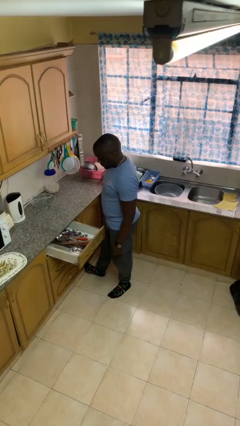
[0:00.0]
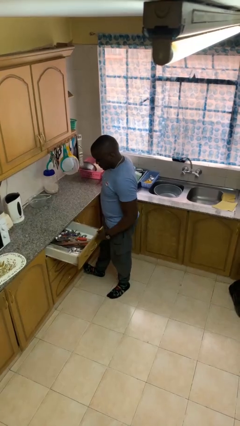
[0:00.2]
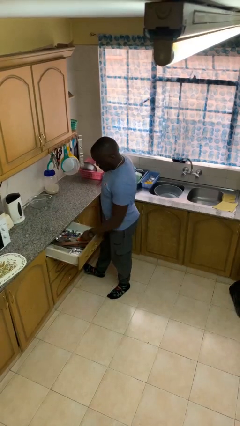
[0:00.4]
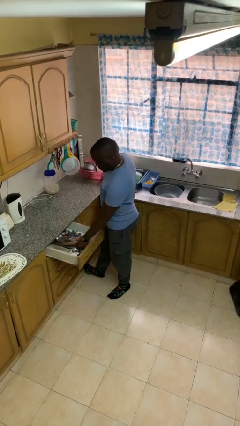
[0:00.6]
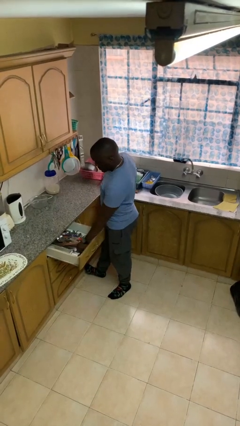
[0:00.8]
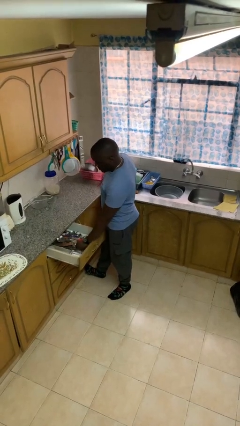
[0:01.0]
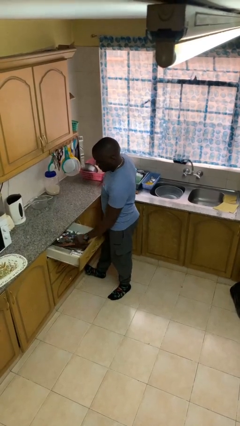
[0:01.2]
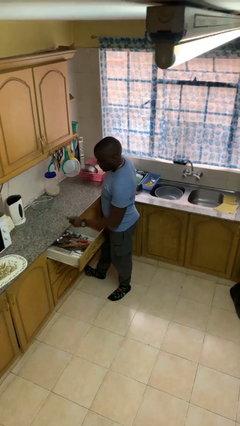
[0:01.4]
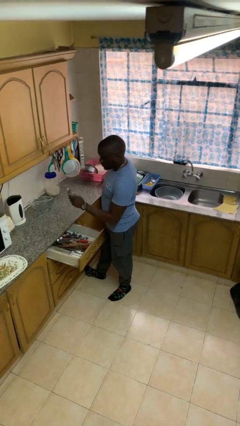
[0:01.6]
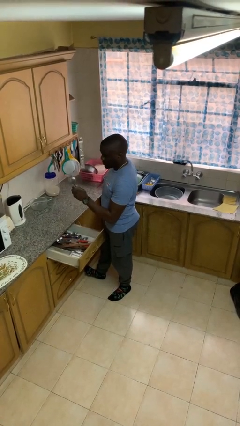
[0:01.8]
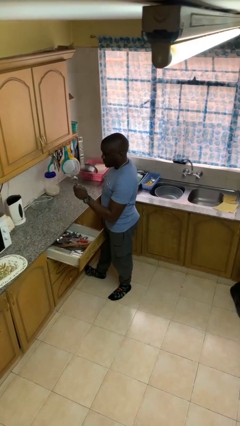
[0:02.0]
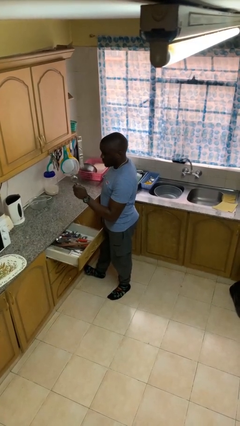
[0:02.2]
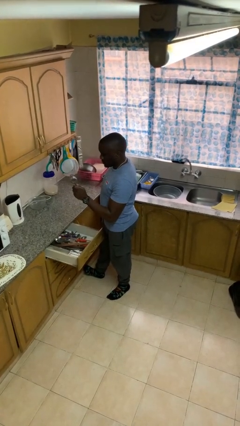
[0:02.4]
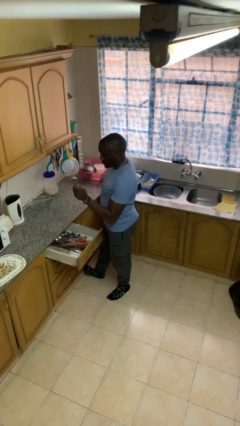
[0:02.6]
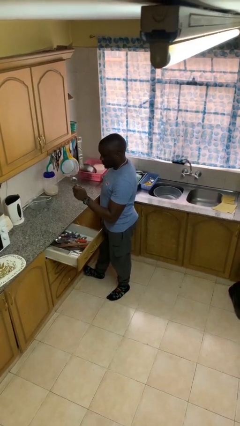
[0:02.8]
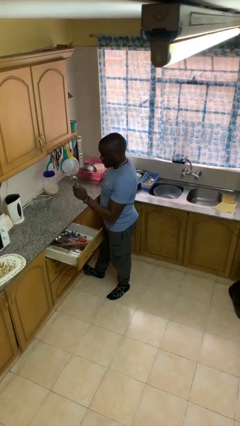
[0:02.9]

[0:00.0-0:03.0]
person takes object from kitchen drawer

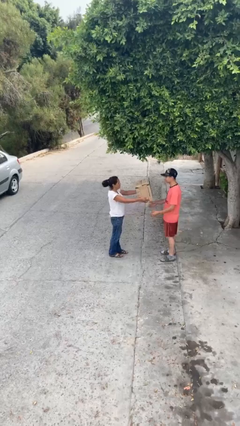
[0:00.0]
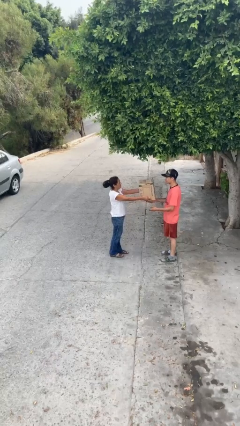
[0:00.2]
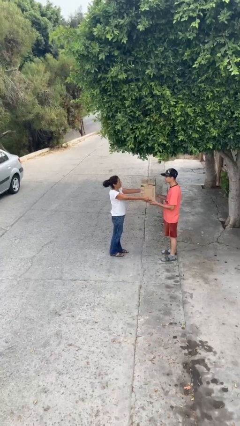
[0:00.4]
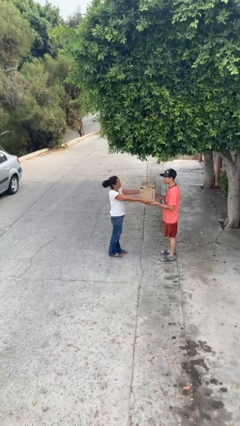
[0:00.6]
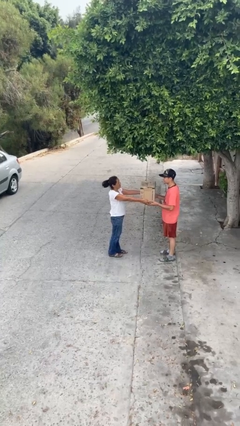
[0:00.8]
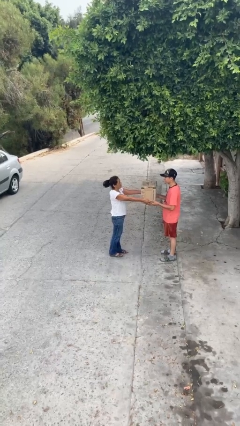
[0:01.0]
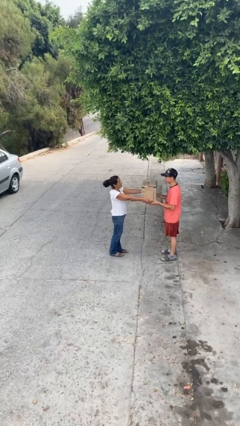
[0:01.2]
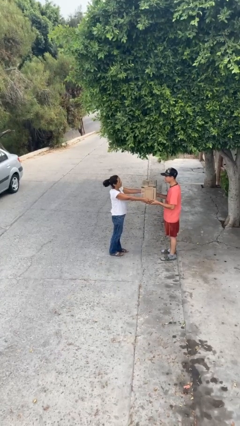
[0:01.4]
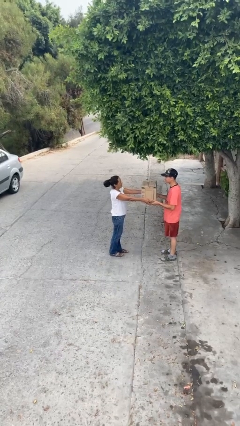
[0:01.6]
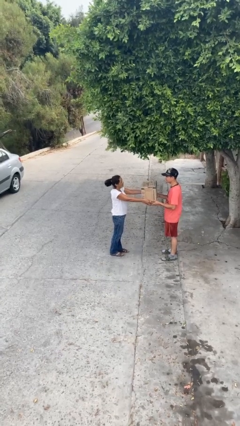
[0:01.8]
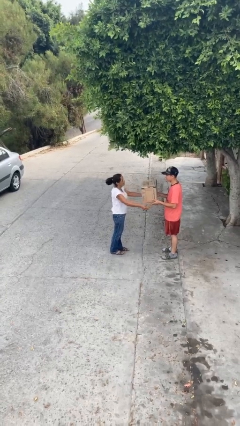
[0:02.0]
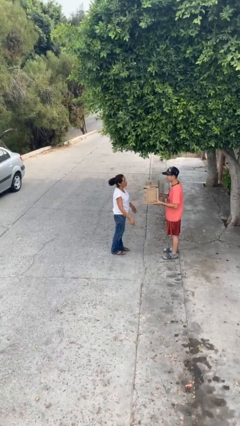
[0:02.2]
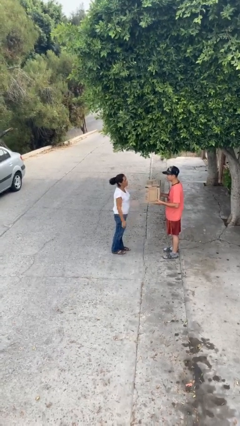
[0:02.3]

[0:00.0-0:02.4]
person transfers object to person

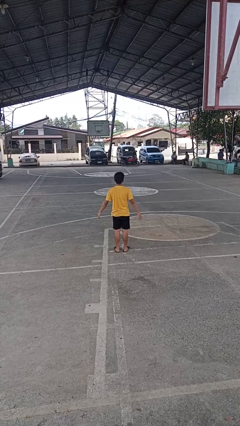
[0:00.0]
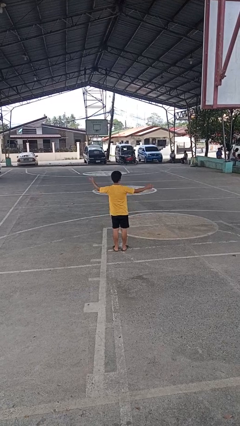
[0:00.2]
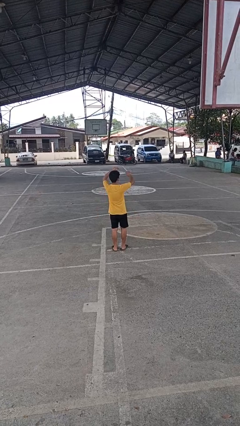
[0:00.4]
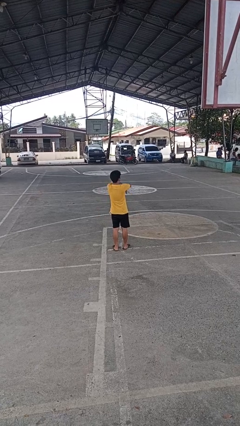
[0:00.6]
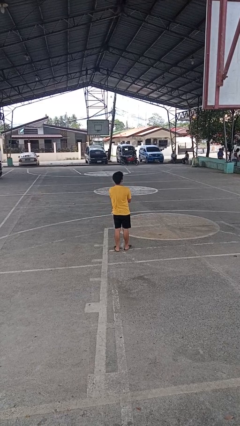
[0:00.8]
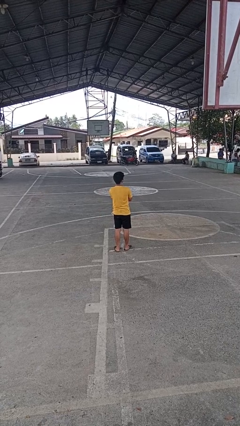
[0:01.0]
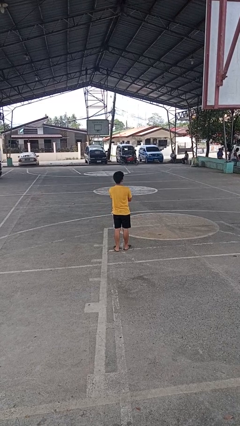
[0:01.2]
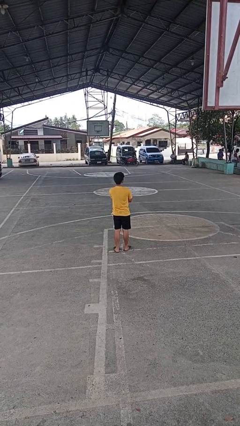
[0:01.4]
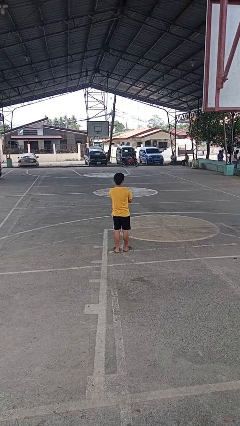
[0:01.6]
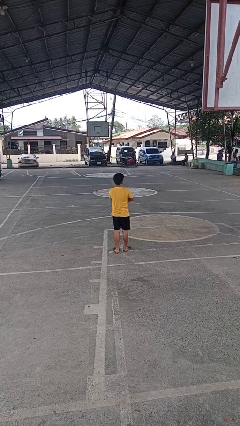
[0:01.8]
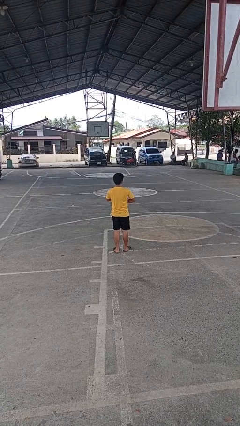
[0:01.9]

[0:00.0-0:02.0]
person crosses arms

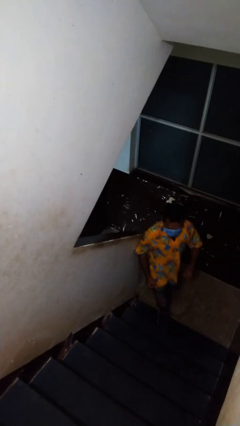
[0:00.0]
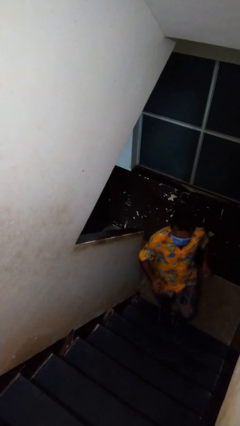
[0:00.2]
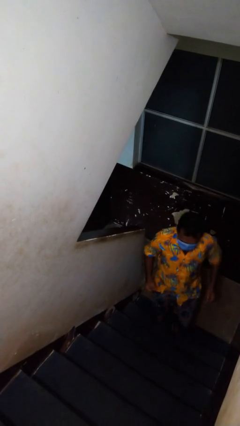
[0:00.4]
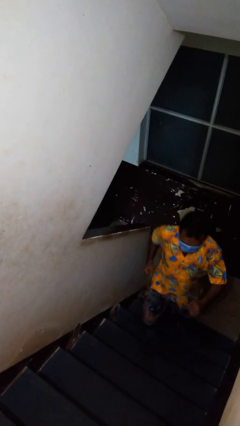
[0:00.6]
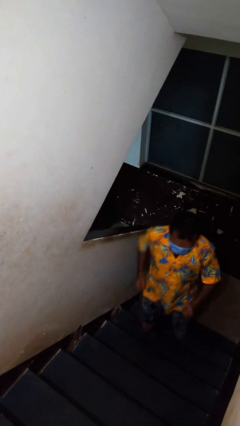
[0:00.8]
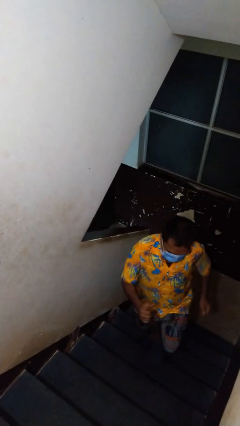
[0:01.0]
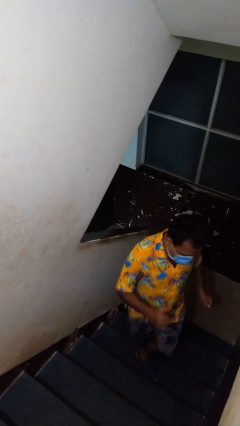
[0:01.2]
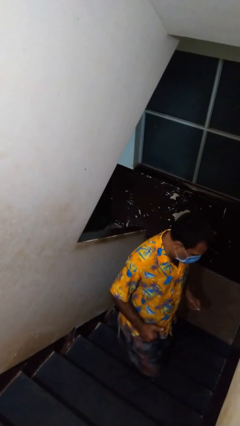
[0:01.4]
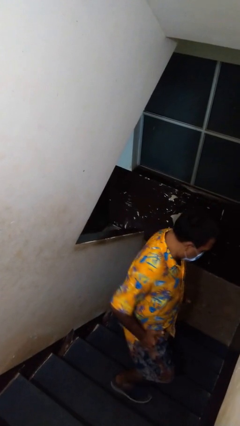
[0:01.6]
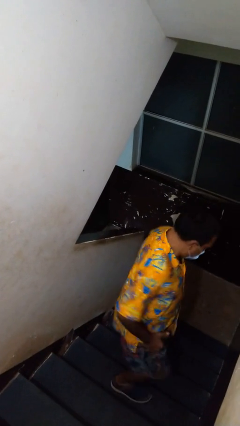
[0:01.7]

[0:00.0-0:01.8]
person climbs up stairs

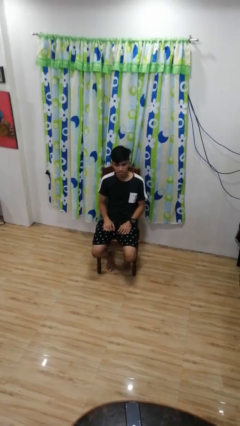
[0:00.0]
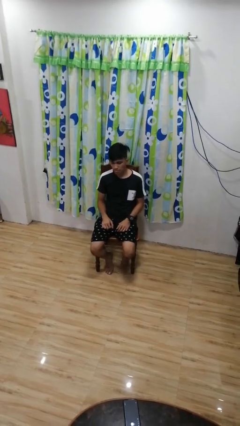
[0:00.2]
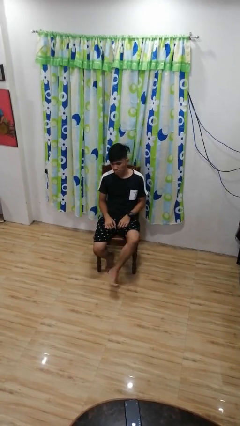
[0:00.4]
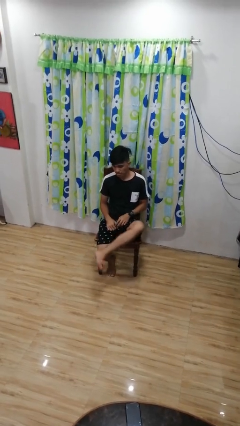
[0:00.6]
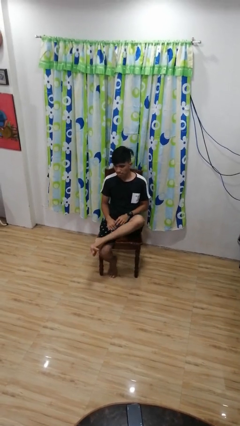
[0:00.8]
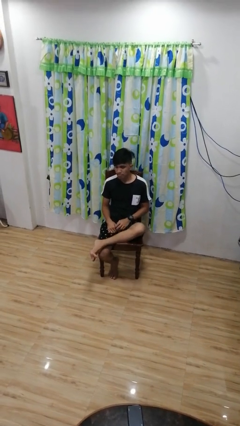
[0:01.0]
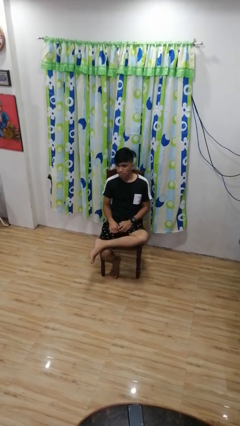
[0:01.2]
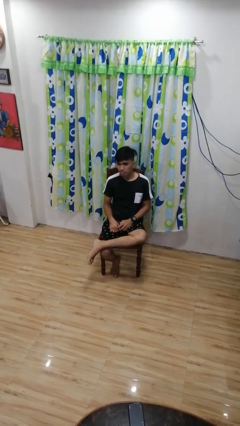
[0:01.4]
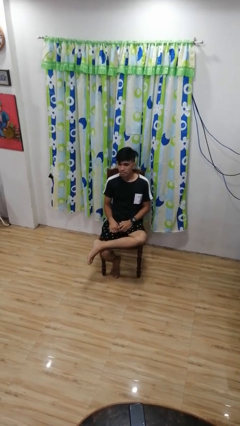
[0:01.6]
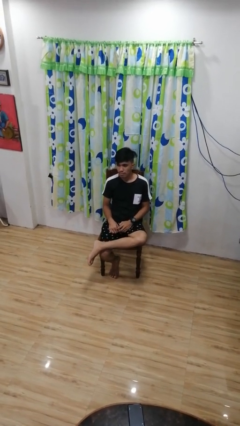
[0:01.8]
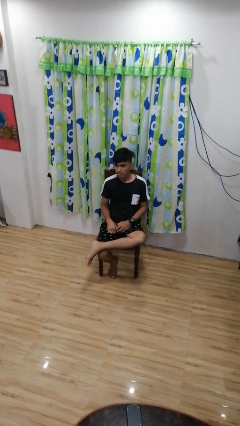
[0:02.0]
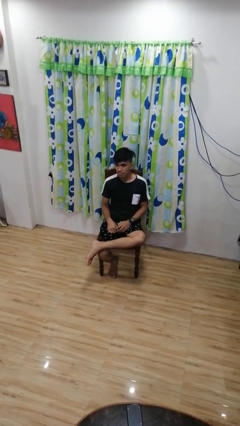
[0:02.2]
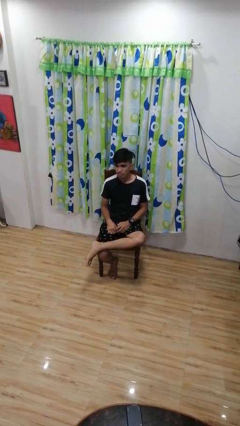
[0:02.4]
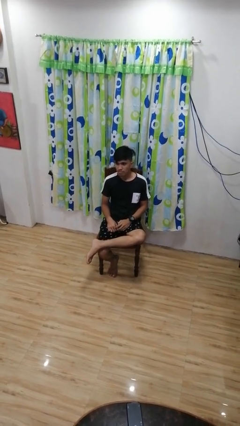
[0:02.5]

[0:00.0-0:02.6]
person crosses legs

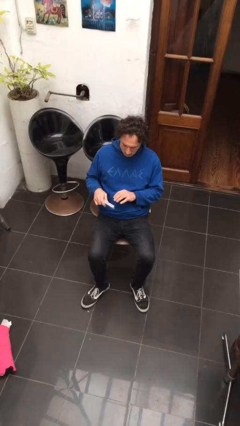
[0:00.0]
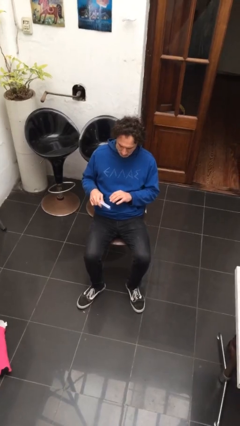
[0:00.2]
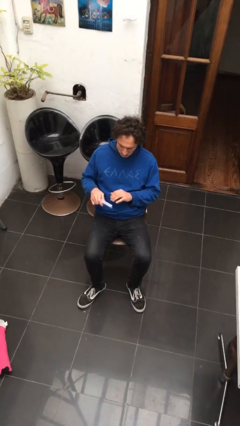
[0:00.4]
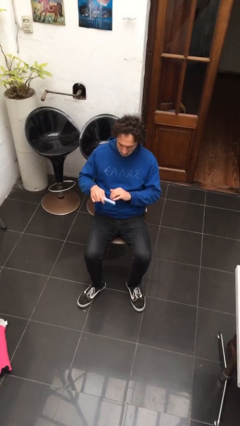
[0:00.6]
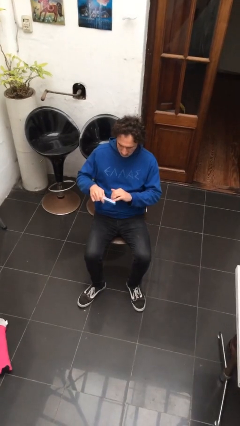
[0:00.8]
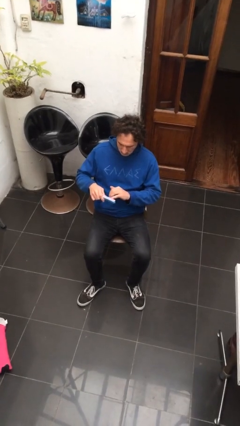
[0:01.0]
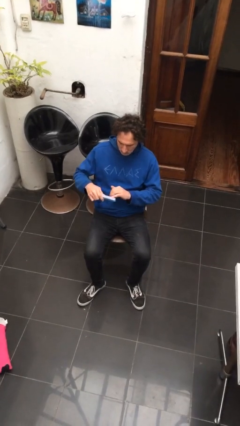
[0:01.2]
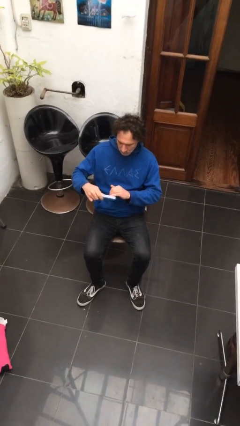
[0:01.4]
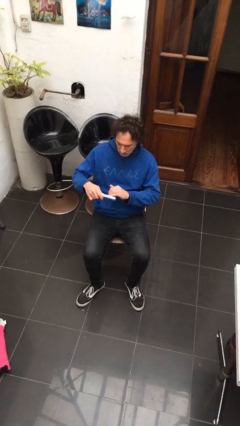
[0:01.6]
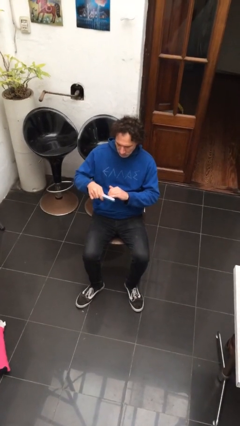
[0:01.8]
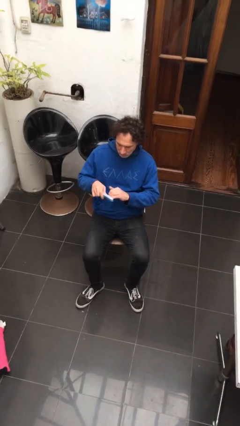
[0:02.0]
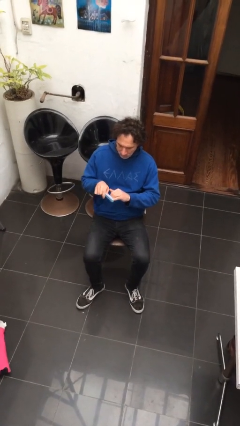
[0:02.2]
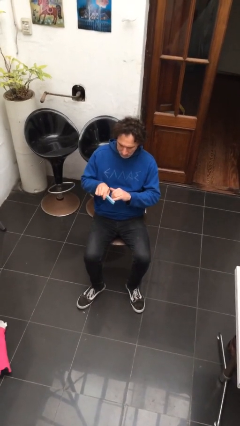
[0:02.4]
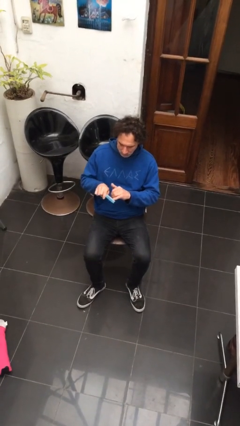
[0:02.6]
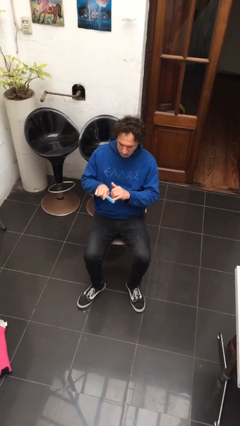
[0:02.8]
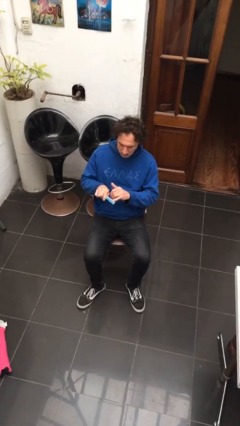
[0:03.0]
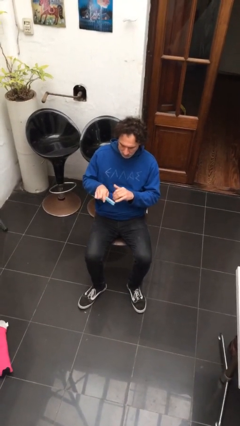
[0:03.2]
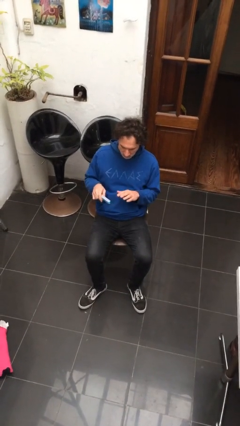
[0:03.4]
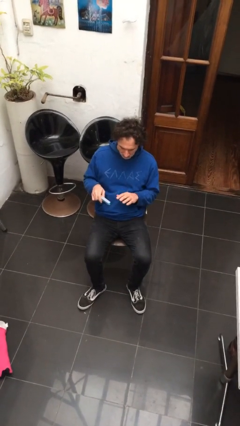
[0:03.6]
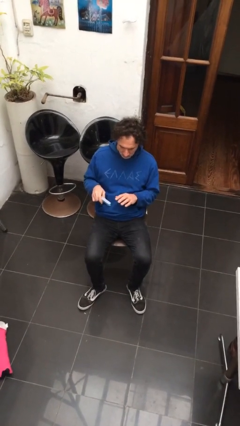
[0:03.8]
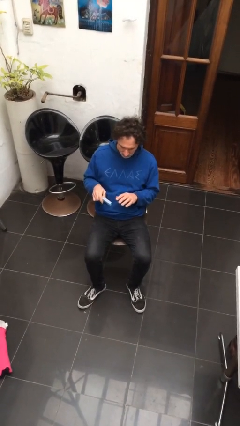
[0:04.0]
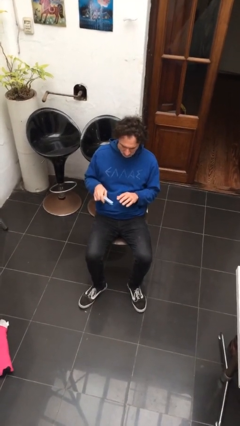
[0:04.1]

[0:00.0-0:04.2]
person files fingernails

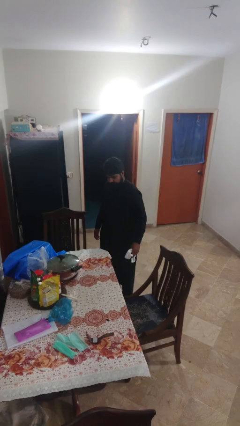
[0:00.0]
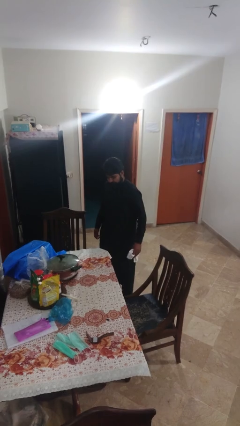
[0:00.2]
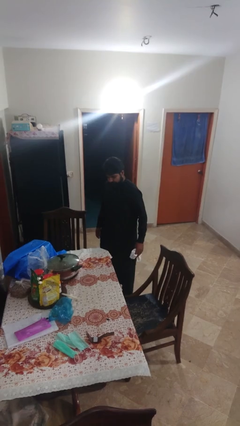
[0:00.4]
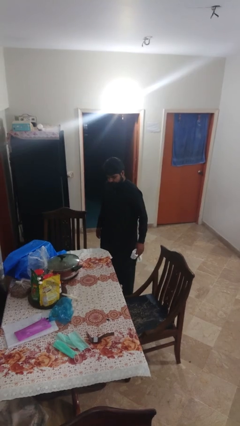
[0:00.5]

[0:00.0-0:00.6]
person cleans table with rag

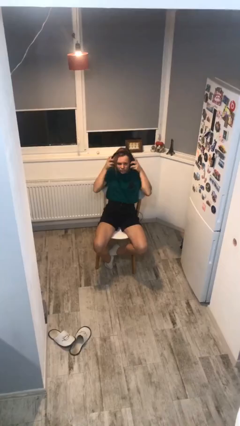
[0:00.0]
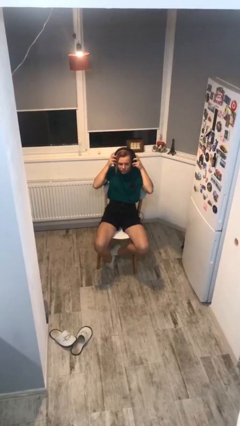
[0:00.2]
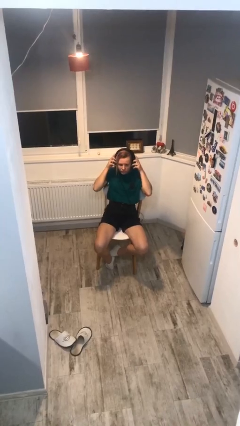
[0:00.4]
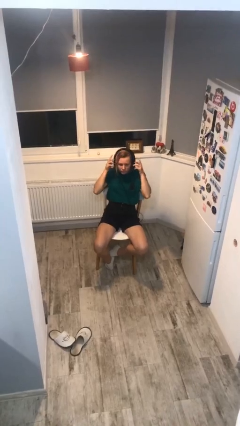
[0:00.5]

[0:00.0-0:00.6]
person puts on headphones
